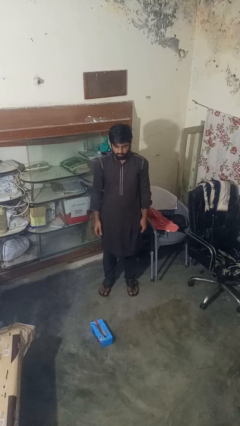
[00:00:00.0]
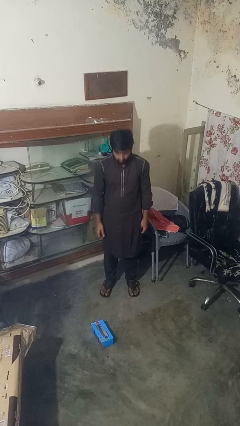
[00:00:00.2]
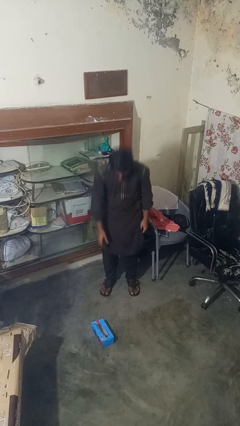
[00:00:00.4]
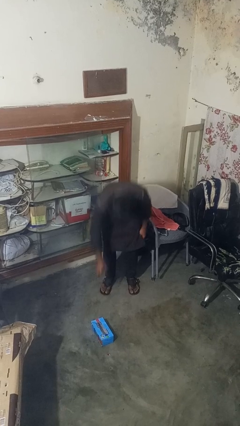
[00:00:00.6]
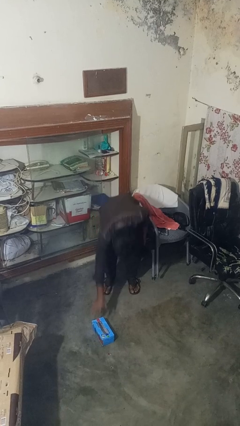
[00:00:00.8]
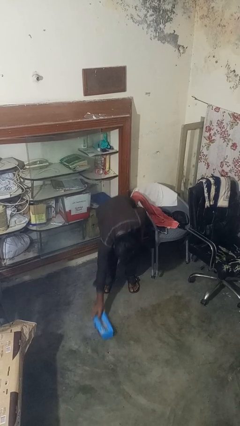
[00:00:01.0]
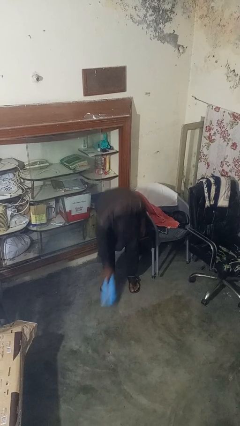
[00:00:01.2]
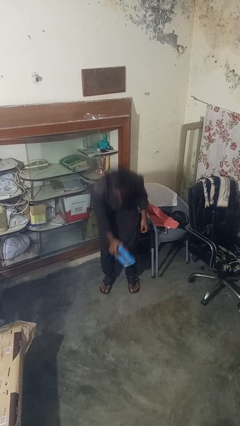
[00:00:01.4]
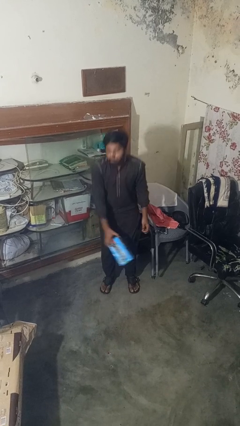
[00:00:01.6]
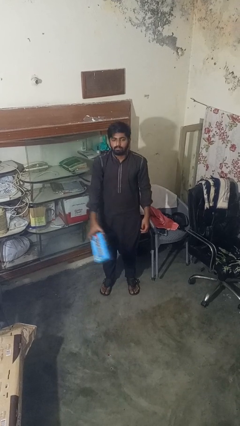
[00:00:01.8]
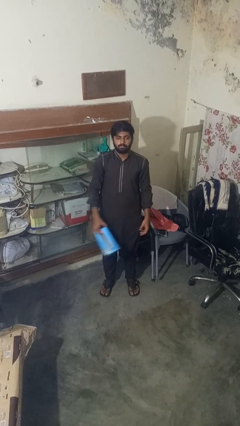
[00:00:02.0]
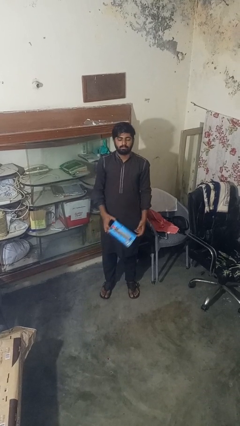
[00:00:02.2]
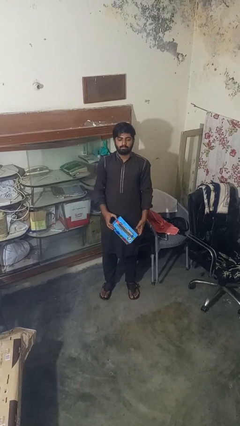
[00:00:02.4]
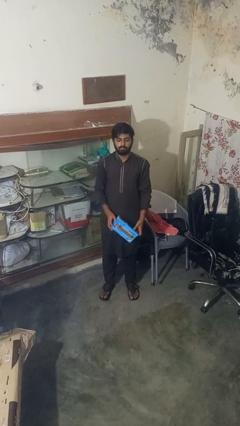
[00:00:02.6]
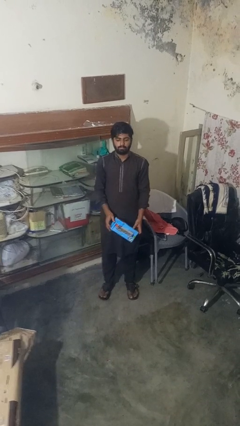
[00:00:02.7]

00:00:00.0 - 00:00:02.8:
person picks up object from floor

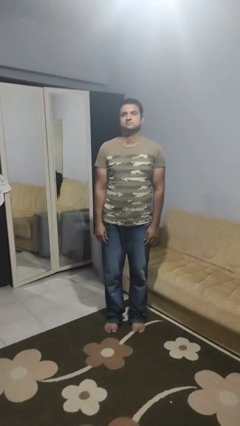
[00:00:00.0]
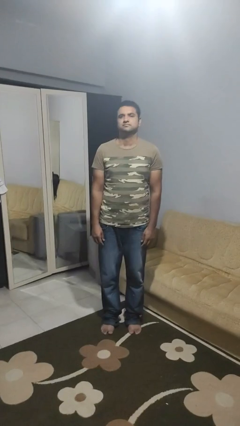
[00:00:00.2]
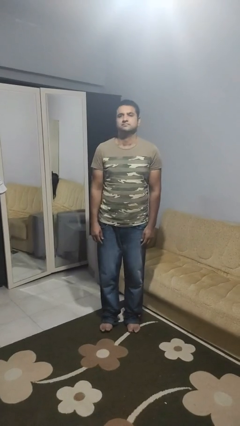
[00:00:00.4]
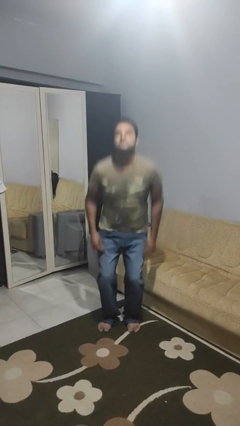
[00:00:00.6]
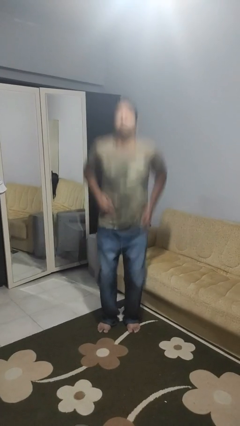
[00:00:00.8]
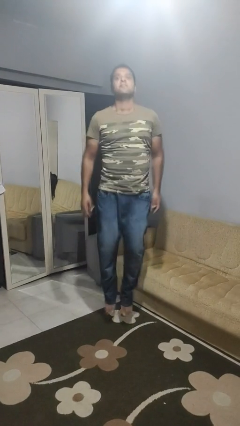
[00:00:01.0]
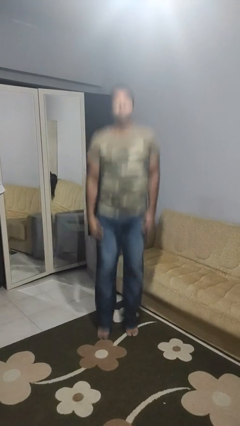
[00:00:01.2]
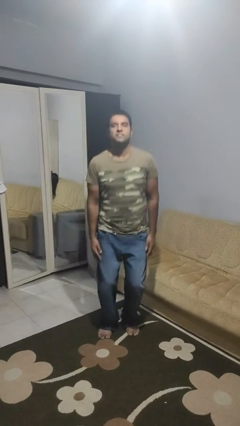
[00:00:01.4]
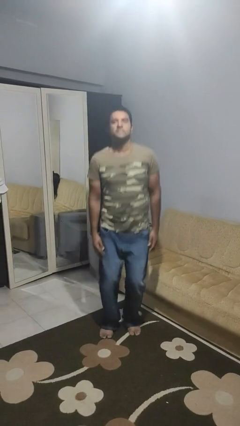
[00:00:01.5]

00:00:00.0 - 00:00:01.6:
person jumps

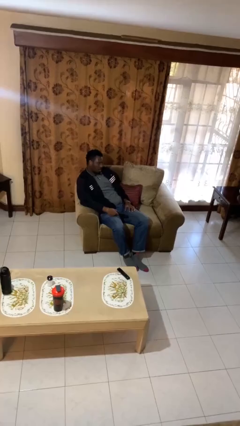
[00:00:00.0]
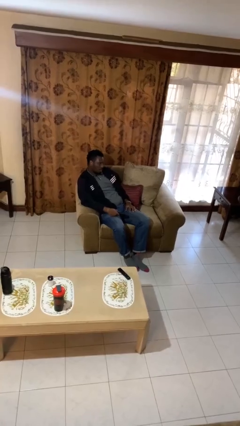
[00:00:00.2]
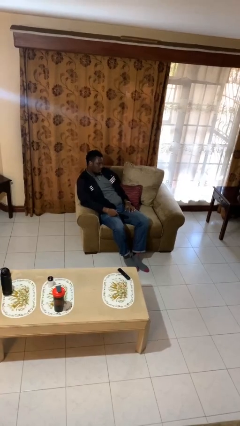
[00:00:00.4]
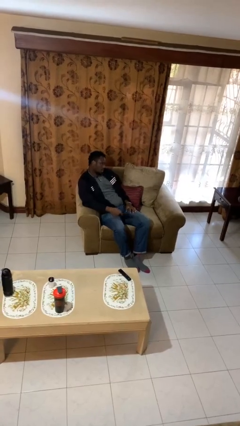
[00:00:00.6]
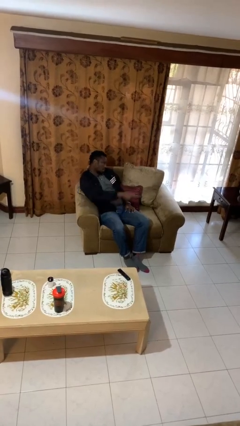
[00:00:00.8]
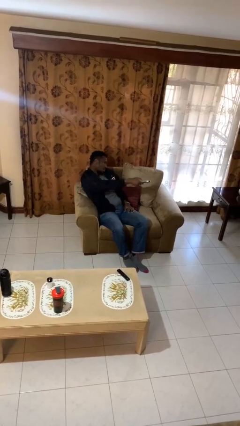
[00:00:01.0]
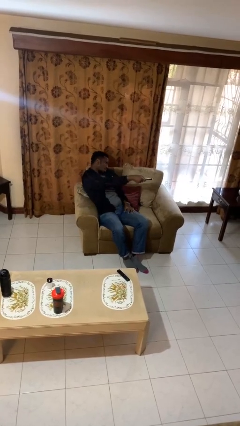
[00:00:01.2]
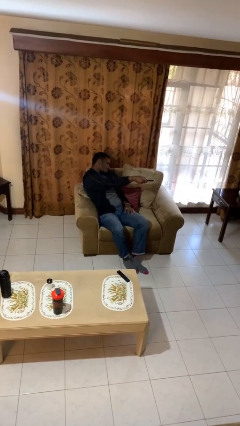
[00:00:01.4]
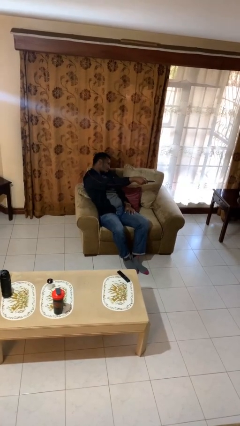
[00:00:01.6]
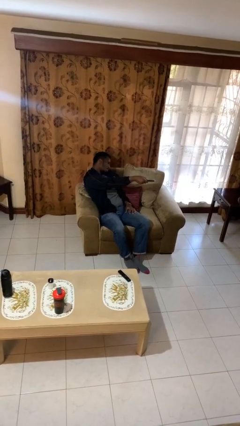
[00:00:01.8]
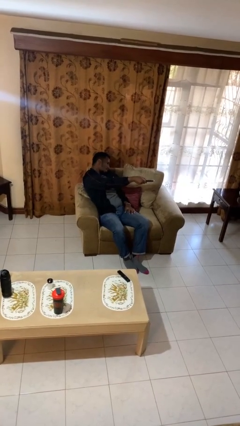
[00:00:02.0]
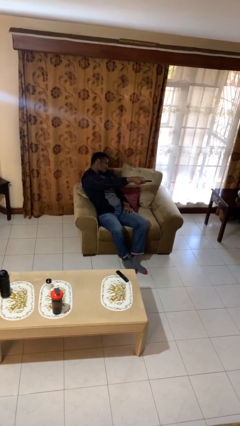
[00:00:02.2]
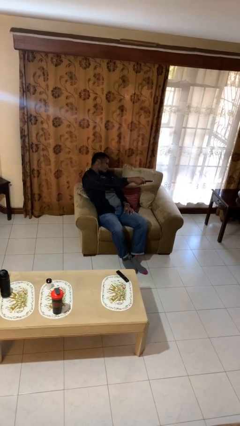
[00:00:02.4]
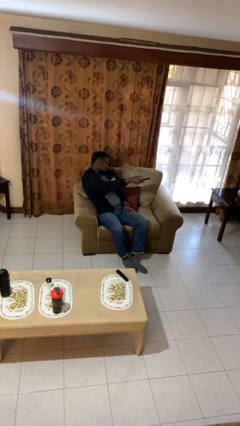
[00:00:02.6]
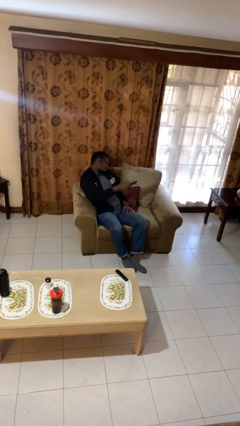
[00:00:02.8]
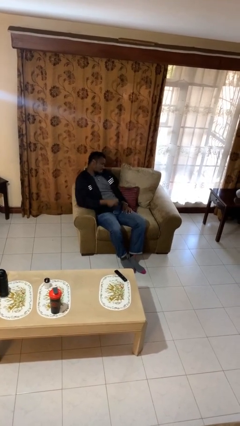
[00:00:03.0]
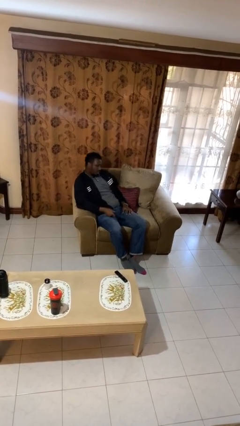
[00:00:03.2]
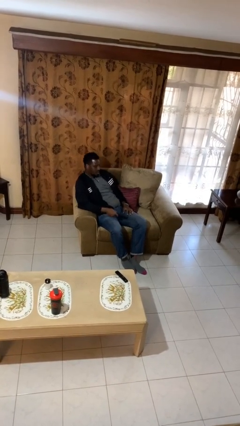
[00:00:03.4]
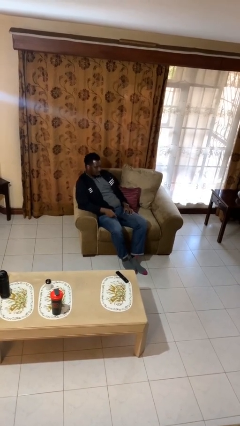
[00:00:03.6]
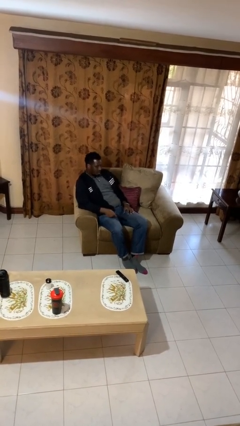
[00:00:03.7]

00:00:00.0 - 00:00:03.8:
person uses television remote

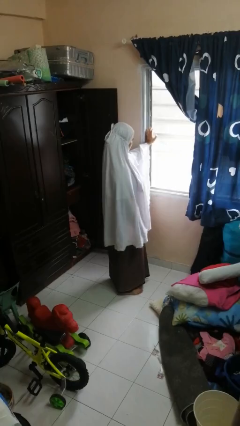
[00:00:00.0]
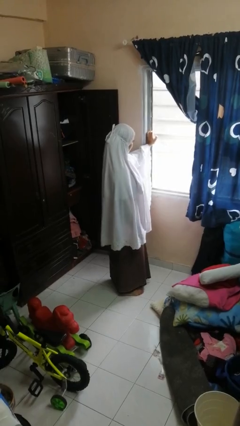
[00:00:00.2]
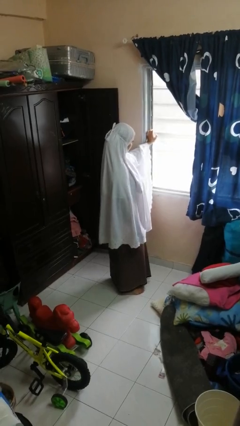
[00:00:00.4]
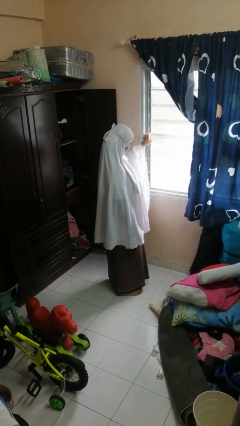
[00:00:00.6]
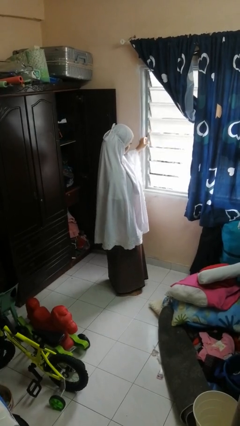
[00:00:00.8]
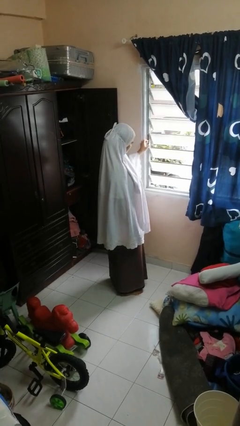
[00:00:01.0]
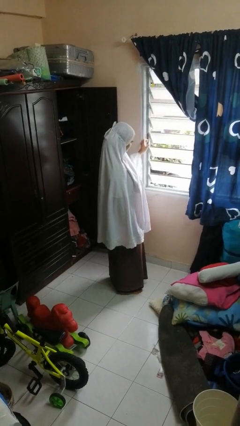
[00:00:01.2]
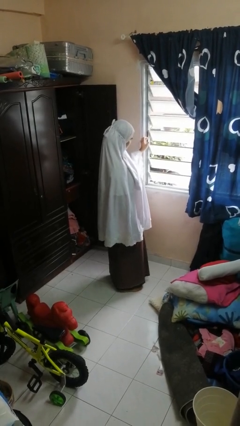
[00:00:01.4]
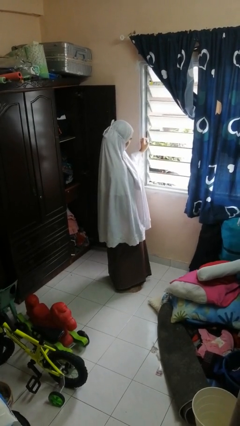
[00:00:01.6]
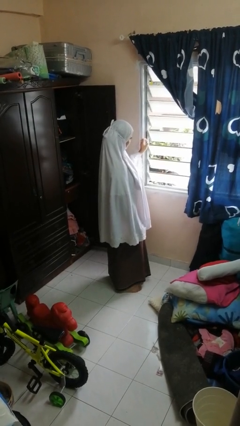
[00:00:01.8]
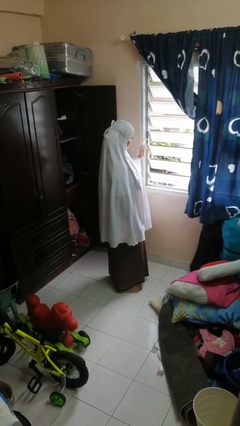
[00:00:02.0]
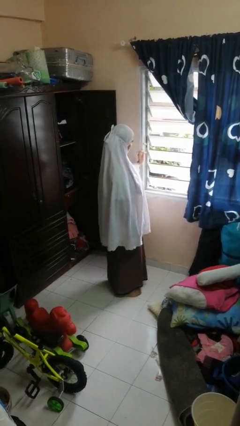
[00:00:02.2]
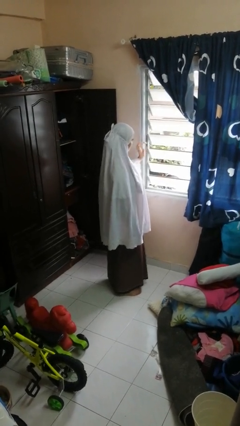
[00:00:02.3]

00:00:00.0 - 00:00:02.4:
person opens home window

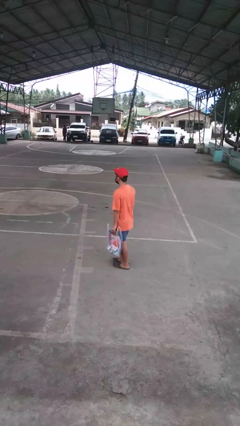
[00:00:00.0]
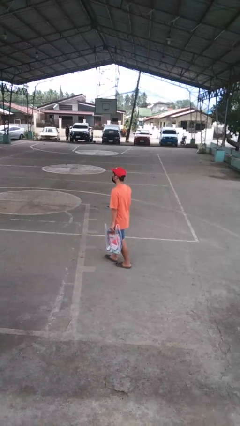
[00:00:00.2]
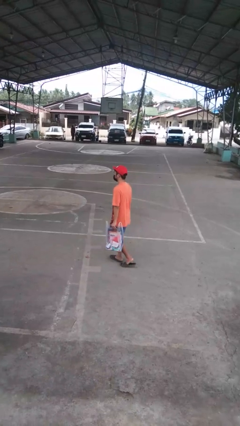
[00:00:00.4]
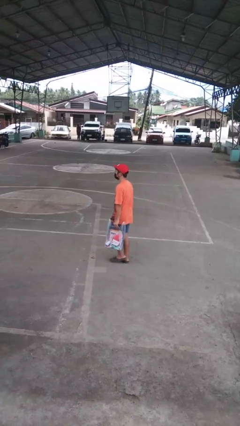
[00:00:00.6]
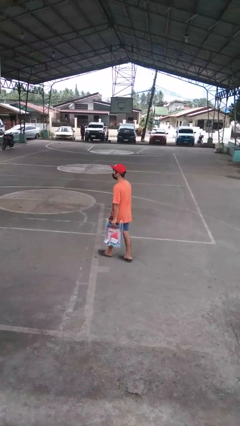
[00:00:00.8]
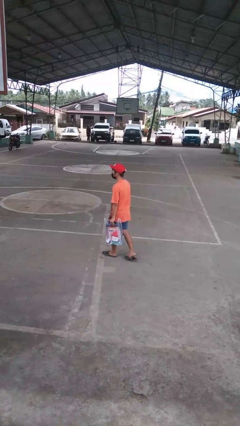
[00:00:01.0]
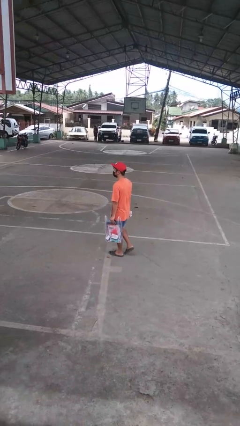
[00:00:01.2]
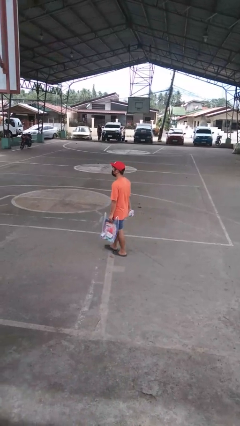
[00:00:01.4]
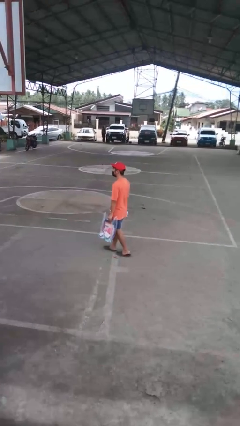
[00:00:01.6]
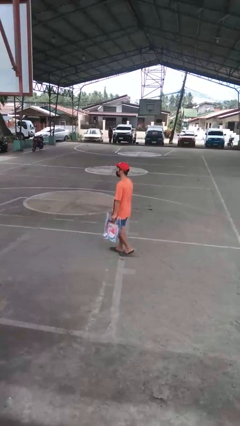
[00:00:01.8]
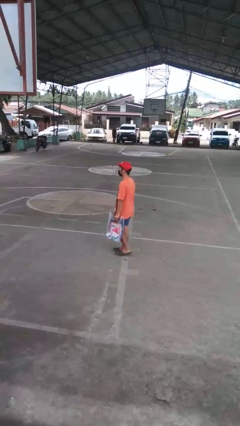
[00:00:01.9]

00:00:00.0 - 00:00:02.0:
person carries groceries

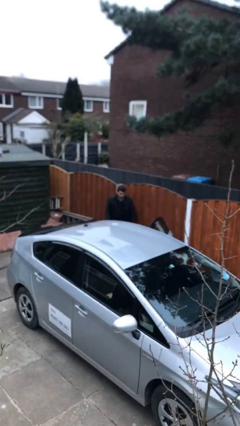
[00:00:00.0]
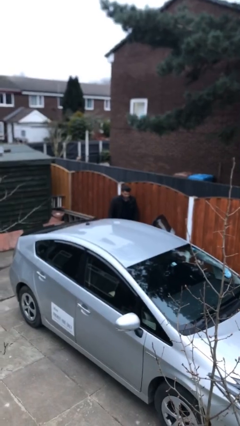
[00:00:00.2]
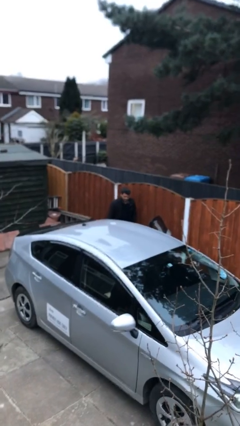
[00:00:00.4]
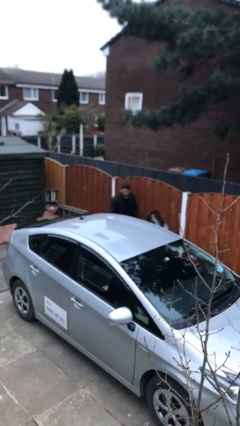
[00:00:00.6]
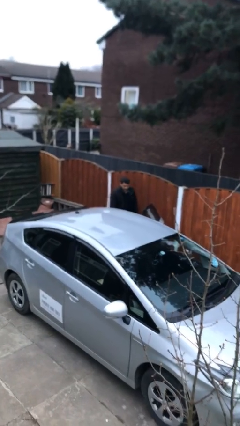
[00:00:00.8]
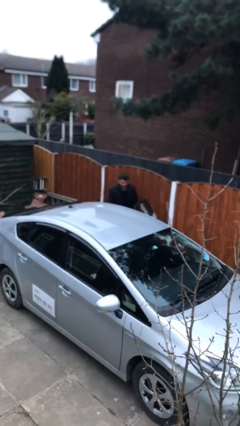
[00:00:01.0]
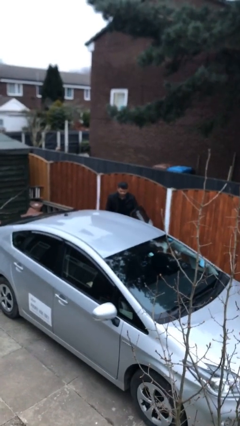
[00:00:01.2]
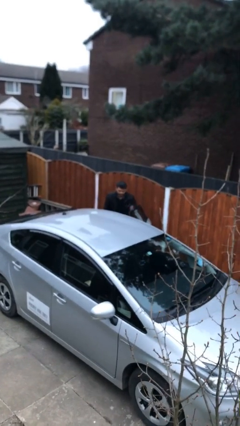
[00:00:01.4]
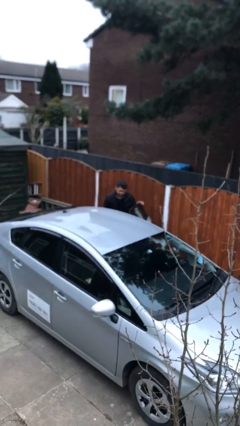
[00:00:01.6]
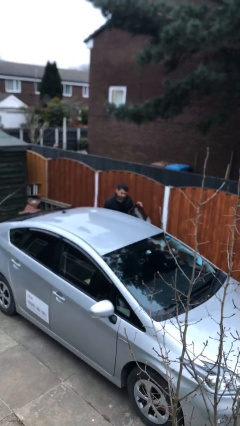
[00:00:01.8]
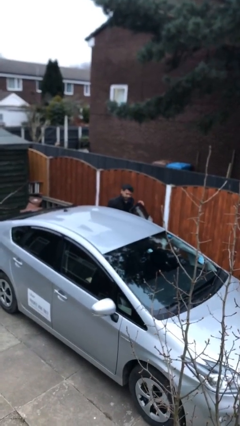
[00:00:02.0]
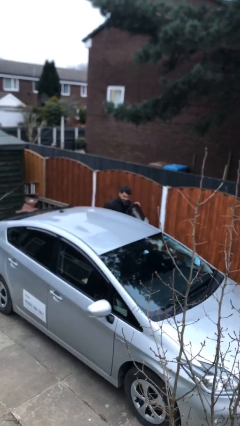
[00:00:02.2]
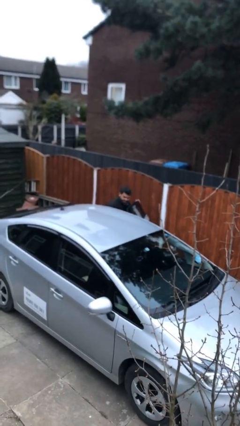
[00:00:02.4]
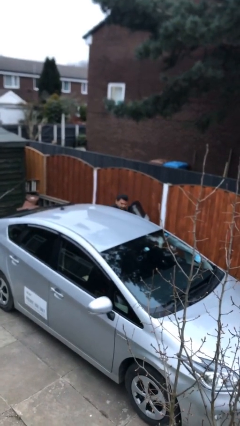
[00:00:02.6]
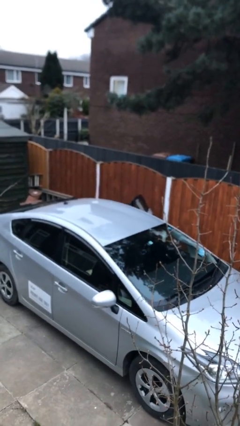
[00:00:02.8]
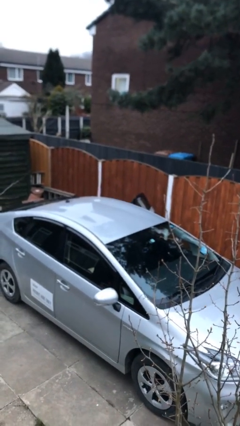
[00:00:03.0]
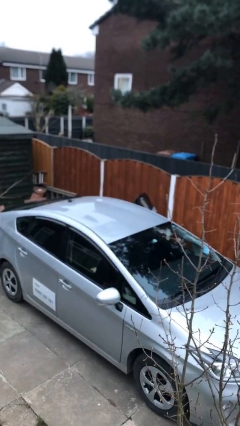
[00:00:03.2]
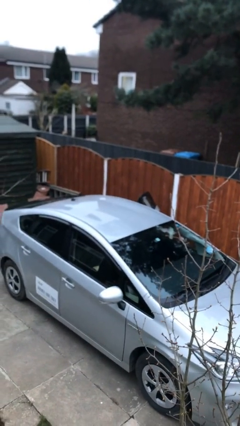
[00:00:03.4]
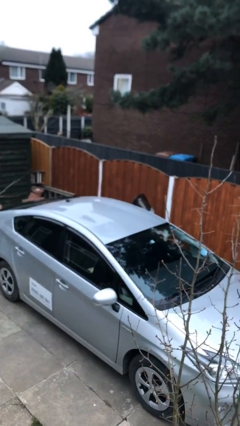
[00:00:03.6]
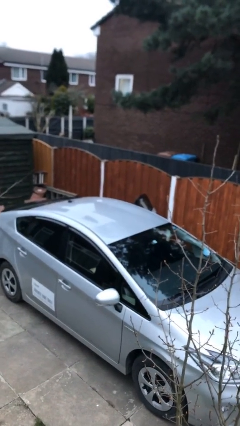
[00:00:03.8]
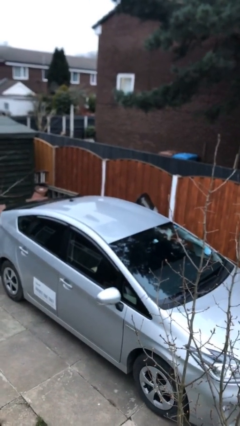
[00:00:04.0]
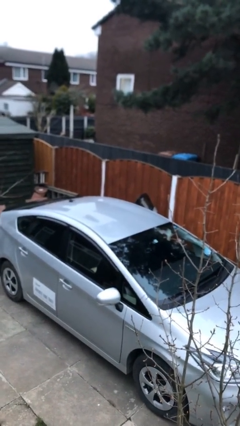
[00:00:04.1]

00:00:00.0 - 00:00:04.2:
person enters car
